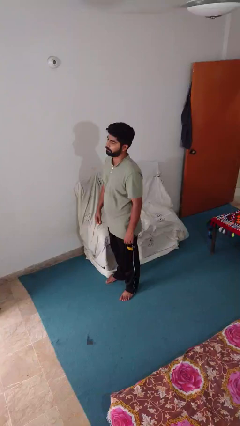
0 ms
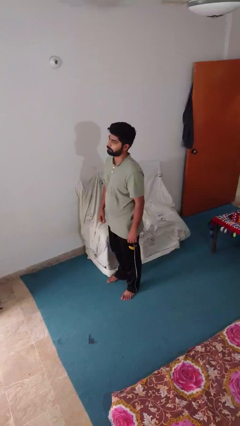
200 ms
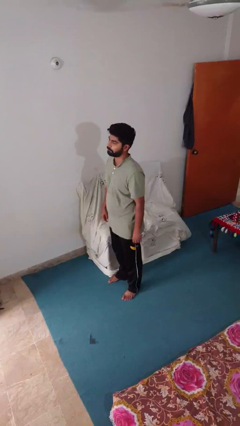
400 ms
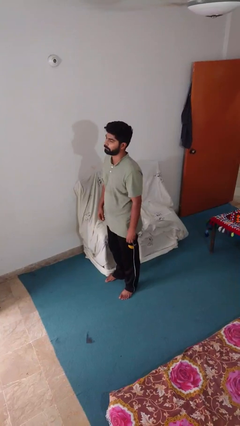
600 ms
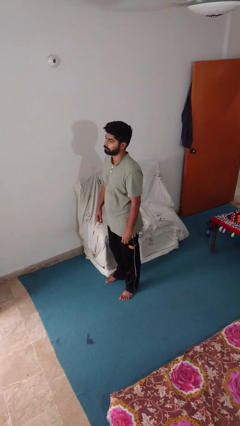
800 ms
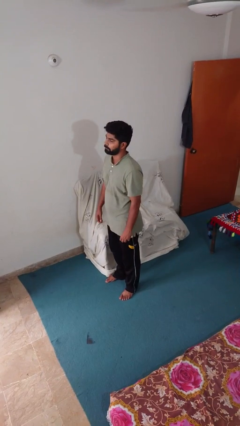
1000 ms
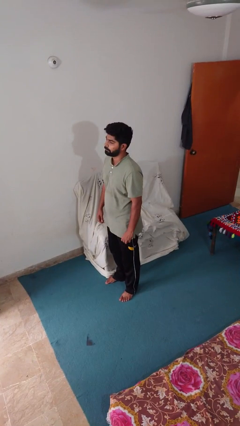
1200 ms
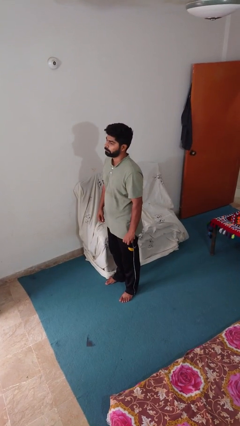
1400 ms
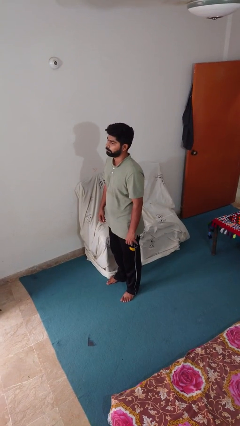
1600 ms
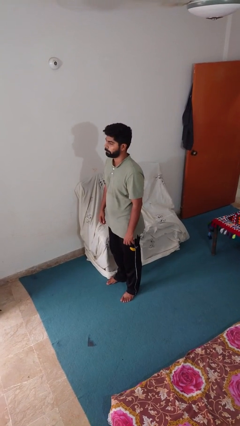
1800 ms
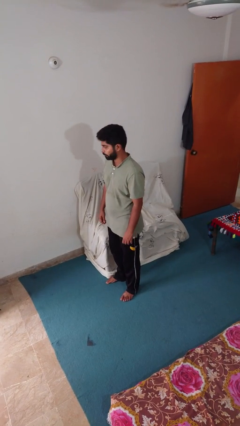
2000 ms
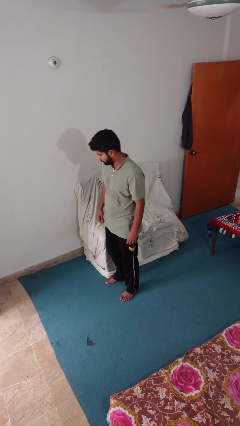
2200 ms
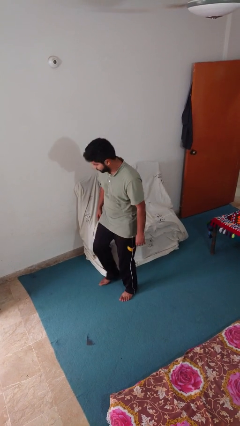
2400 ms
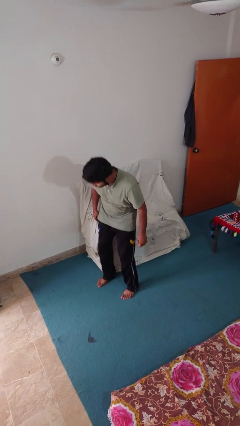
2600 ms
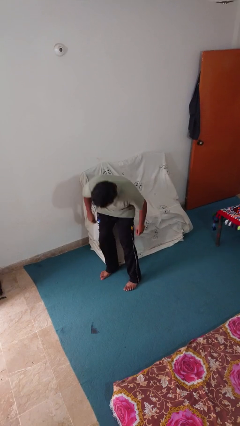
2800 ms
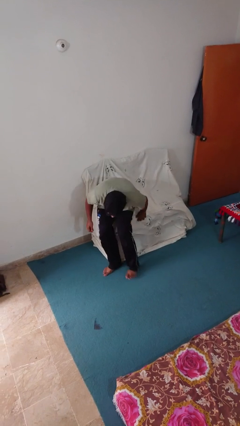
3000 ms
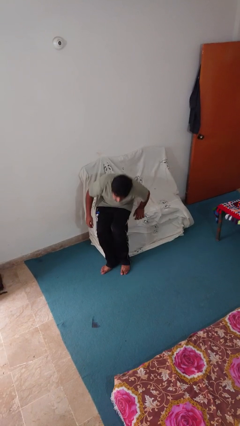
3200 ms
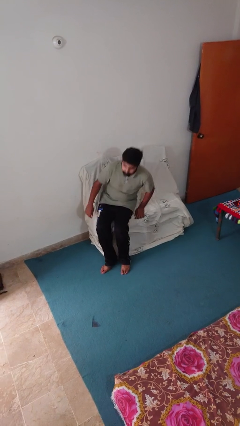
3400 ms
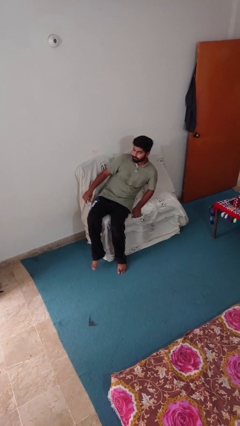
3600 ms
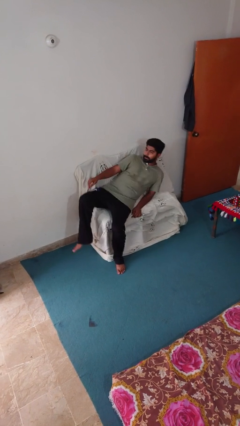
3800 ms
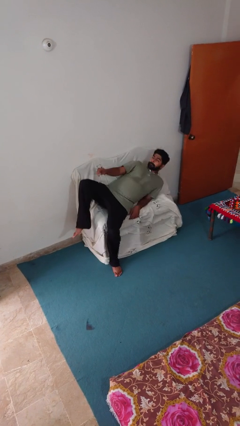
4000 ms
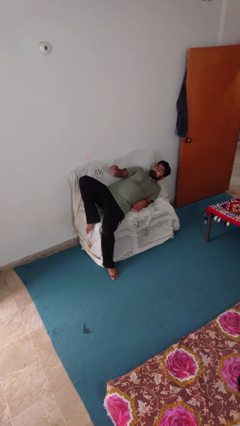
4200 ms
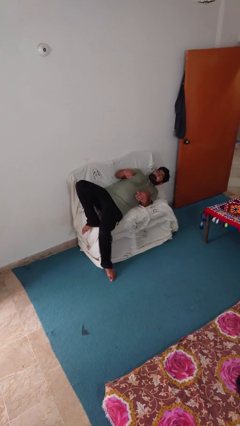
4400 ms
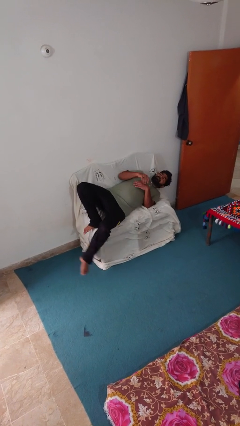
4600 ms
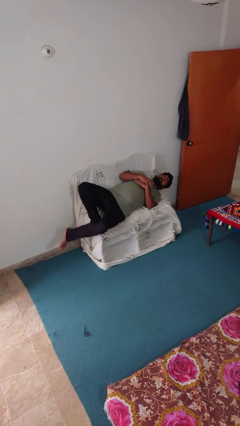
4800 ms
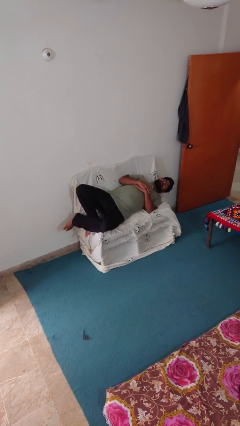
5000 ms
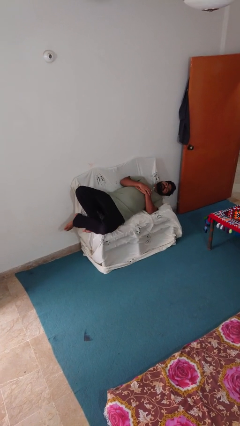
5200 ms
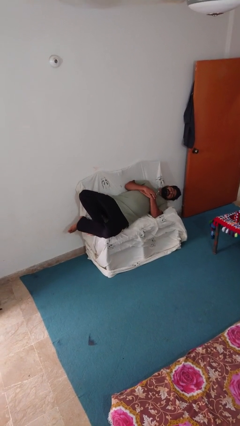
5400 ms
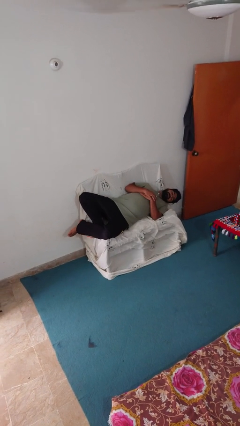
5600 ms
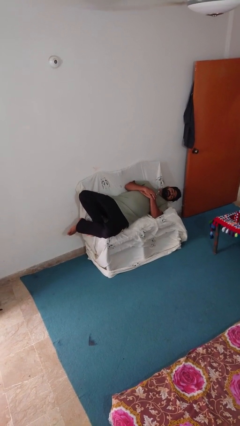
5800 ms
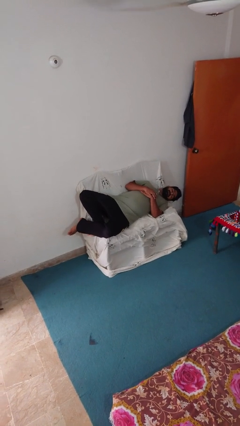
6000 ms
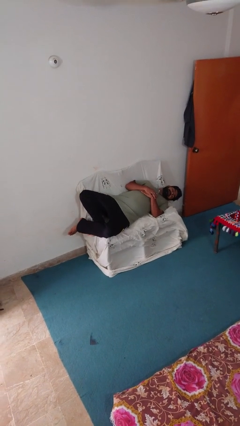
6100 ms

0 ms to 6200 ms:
person lies down on couch

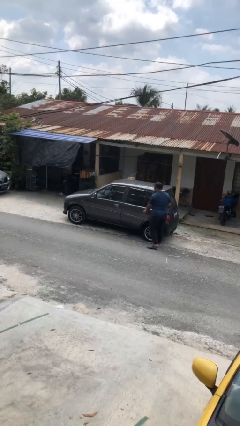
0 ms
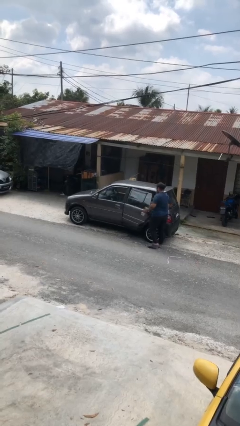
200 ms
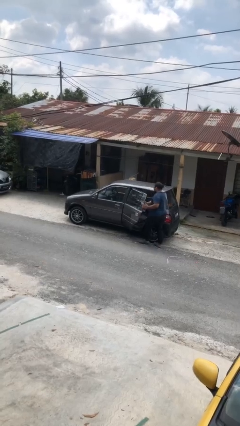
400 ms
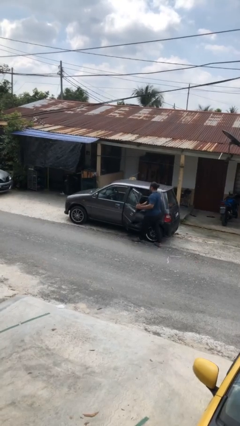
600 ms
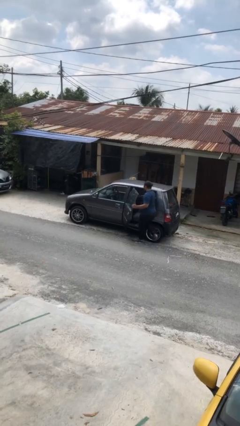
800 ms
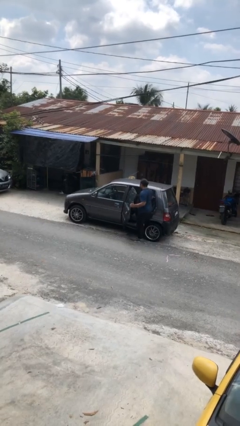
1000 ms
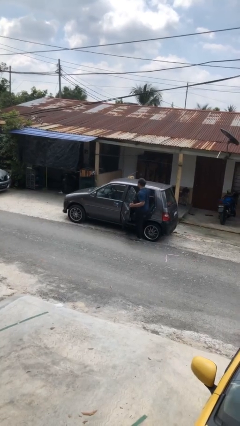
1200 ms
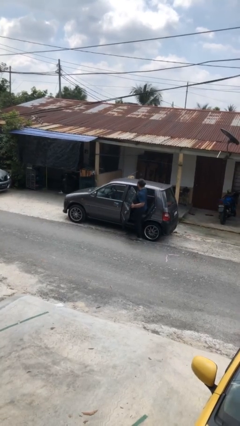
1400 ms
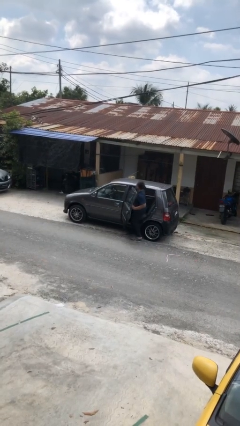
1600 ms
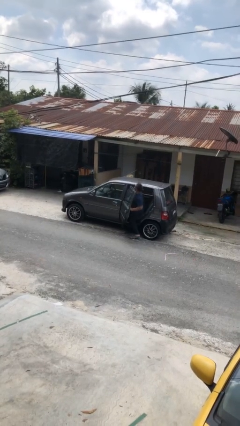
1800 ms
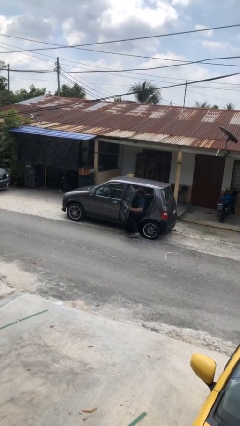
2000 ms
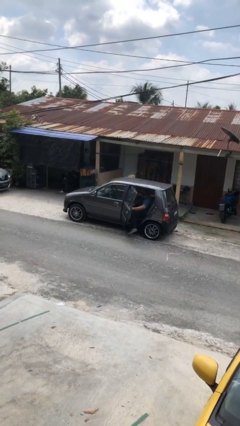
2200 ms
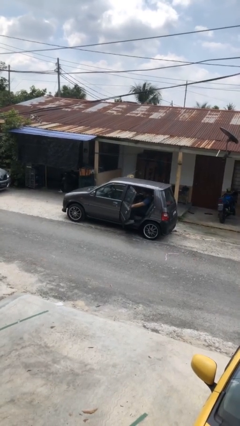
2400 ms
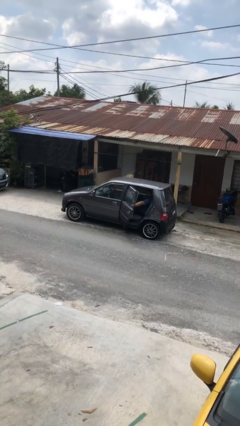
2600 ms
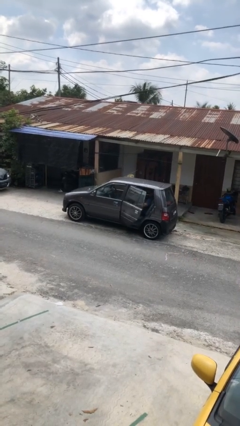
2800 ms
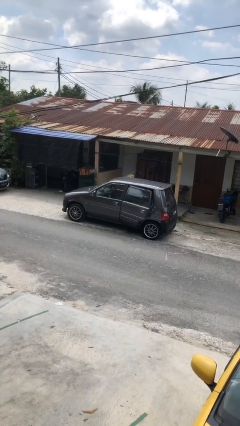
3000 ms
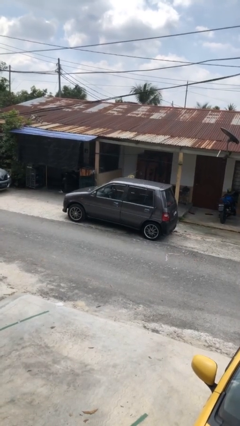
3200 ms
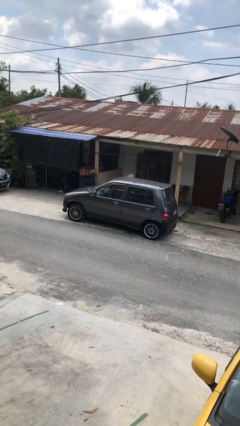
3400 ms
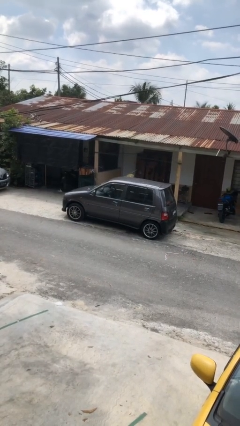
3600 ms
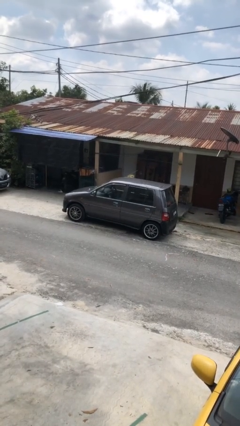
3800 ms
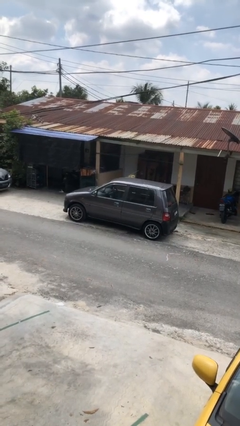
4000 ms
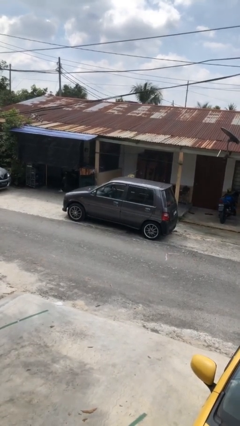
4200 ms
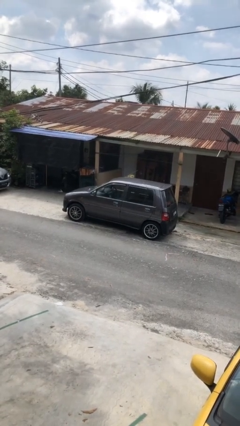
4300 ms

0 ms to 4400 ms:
car picks up person

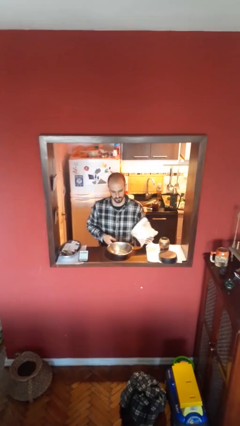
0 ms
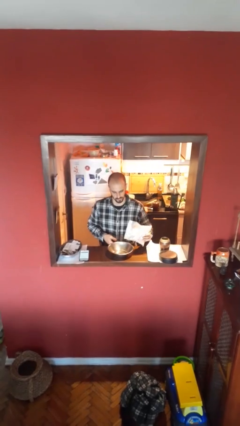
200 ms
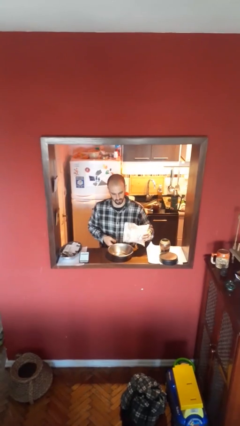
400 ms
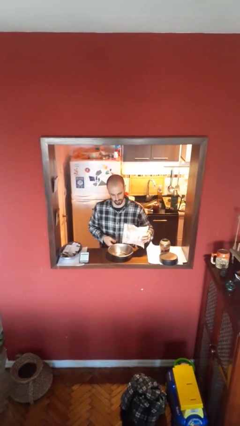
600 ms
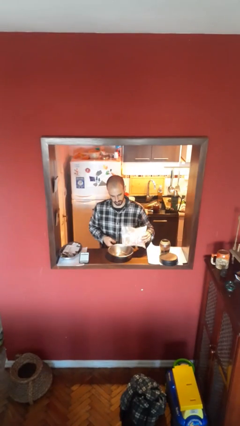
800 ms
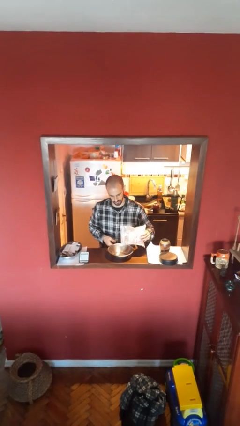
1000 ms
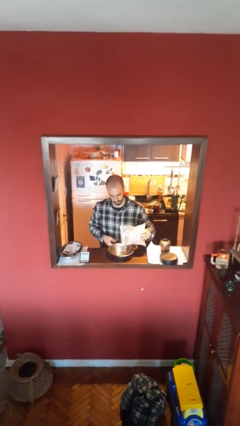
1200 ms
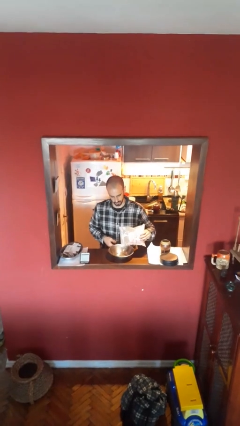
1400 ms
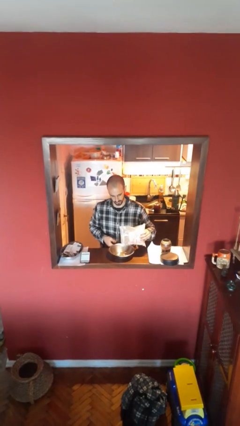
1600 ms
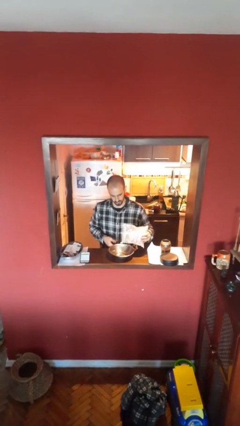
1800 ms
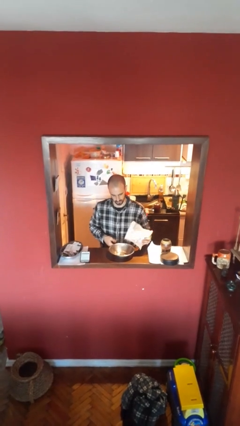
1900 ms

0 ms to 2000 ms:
person pours into bowl

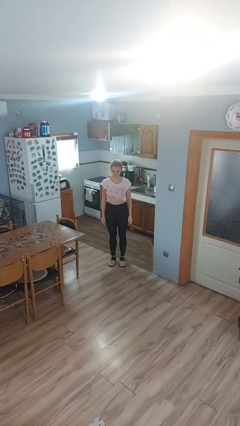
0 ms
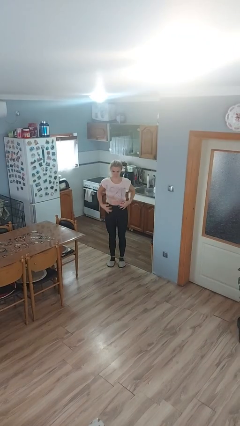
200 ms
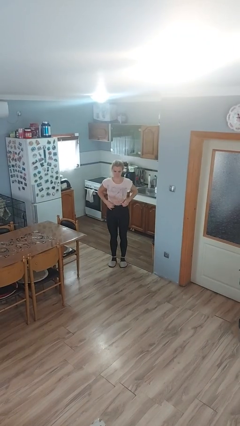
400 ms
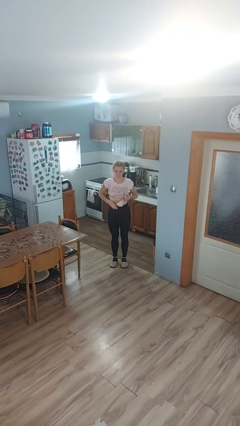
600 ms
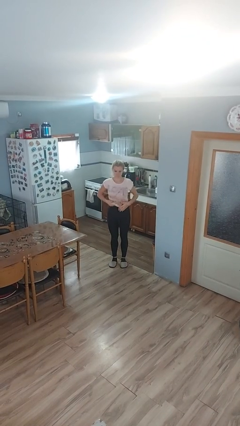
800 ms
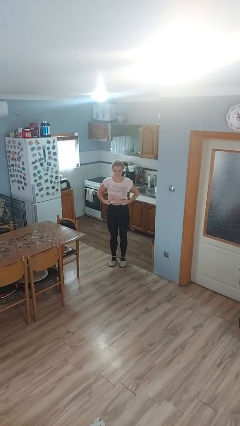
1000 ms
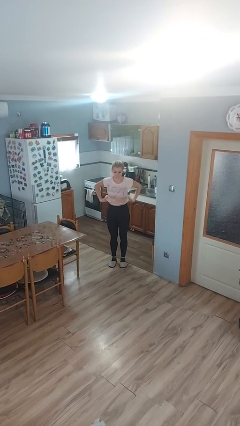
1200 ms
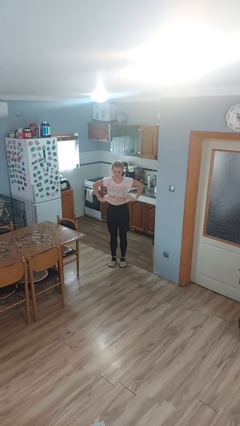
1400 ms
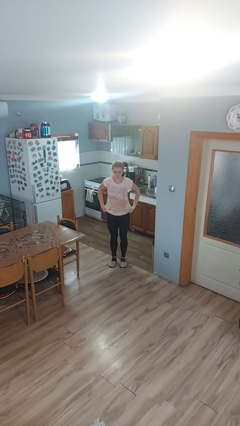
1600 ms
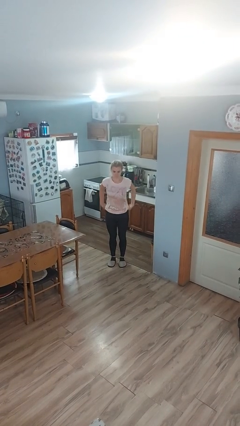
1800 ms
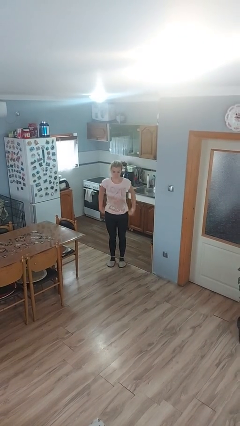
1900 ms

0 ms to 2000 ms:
person untucks shirt

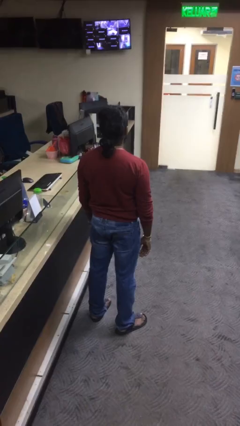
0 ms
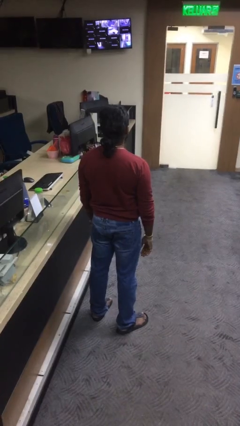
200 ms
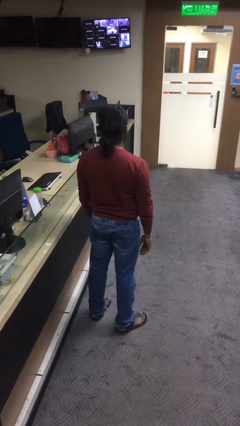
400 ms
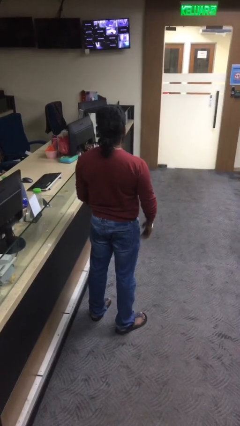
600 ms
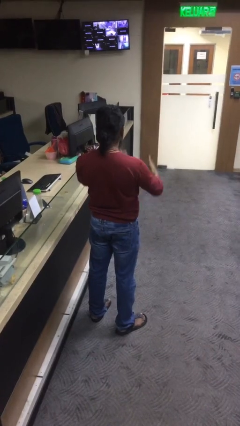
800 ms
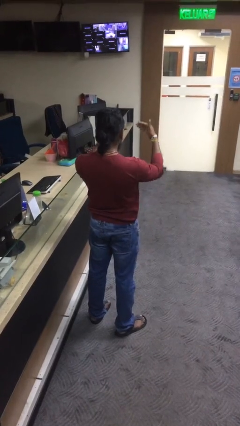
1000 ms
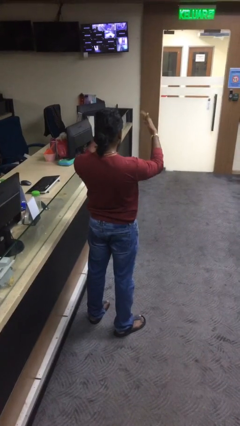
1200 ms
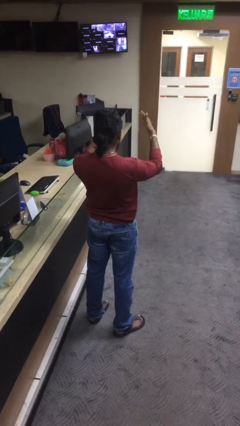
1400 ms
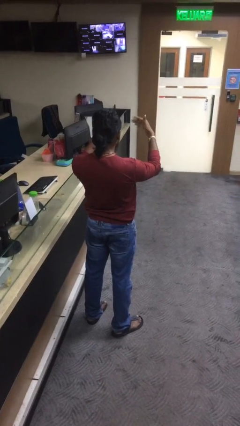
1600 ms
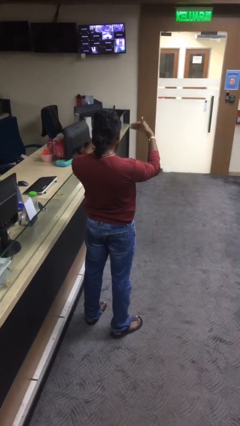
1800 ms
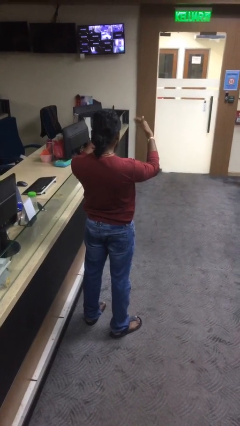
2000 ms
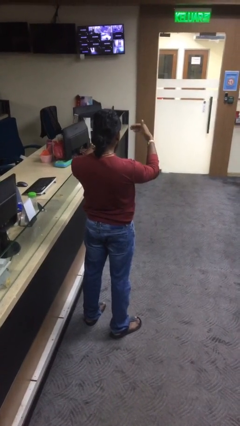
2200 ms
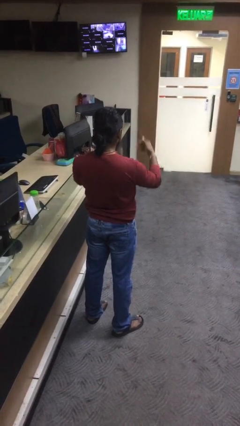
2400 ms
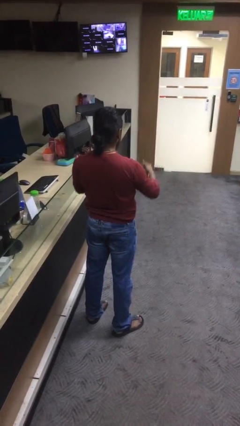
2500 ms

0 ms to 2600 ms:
person gestures come here

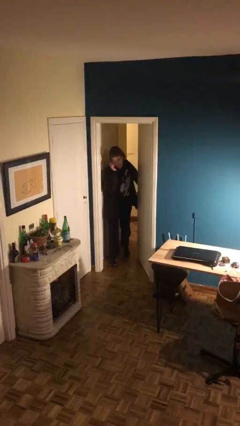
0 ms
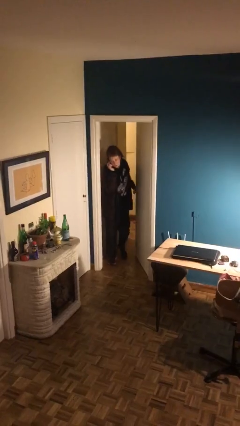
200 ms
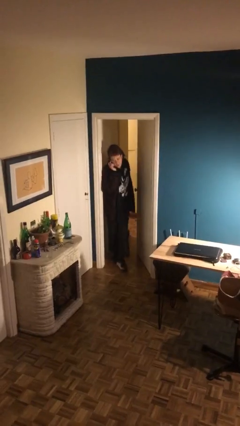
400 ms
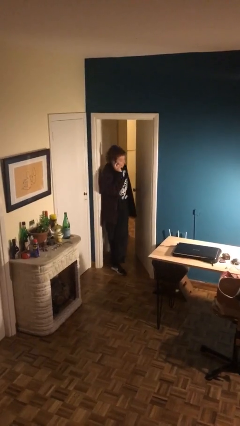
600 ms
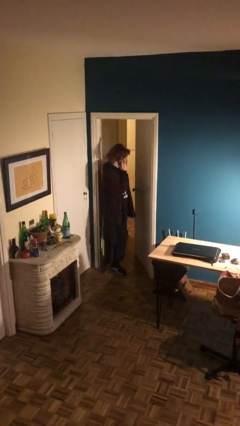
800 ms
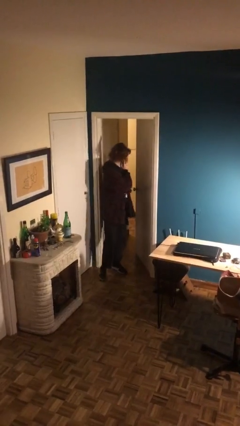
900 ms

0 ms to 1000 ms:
person enters scene through structure
